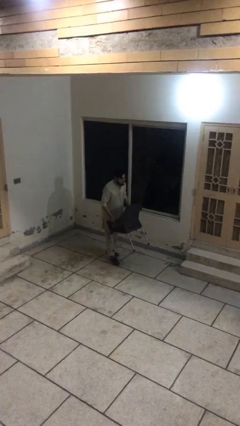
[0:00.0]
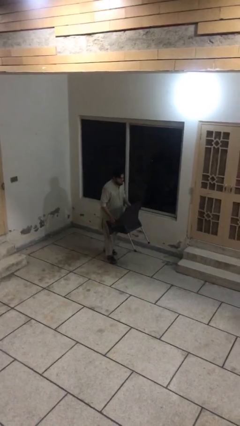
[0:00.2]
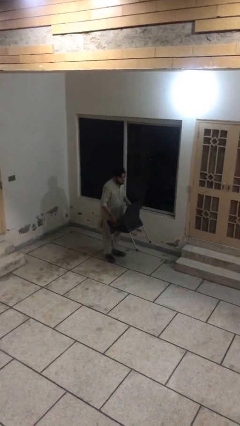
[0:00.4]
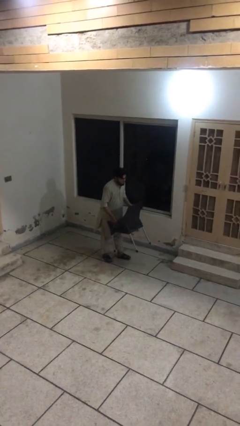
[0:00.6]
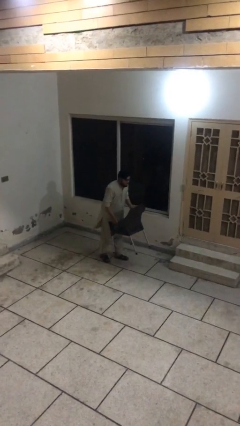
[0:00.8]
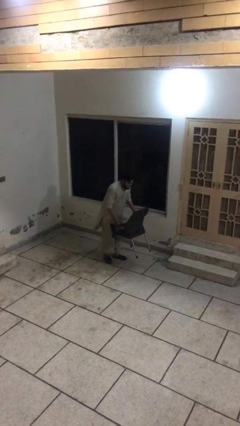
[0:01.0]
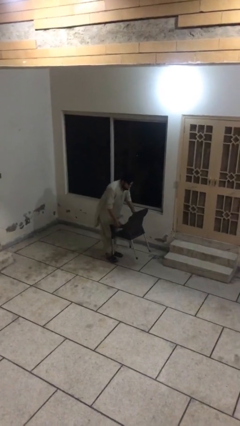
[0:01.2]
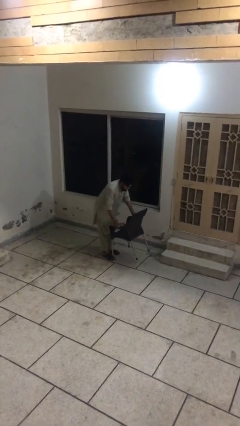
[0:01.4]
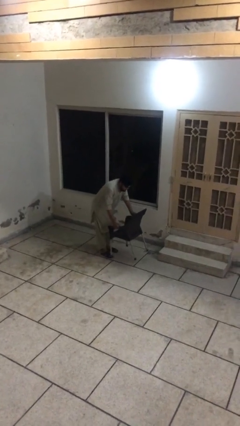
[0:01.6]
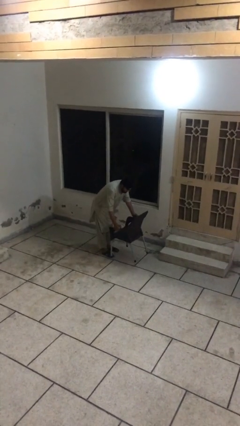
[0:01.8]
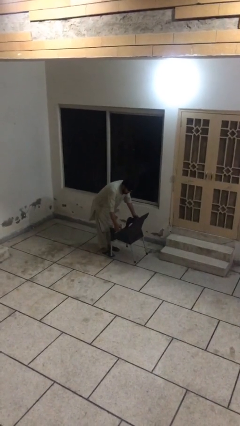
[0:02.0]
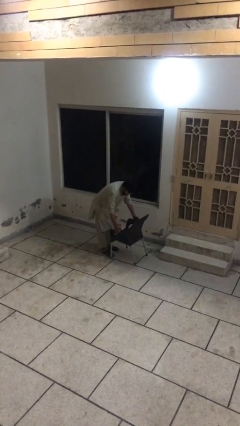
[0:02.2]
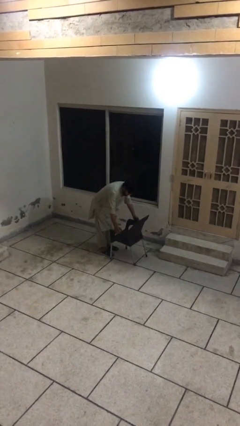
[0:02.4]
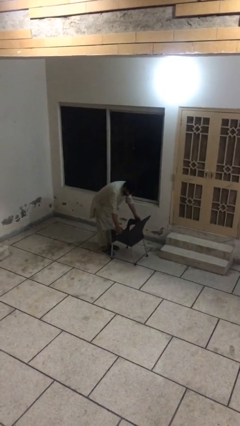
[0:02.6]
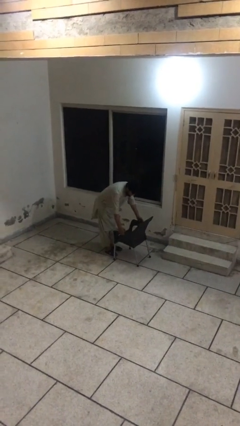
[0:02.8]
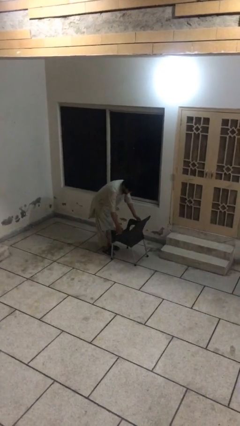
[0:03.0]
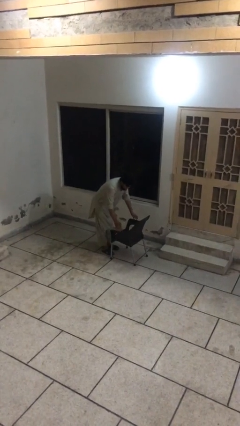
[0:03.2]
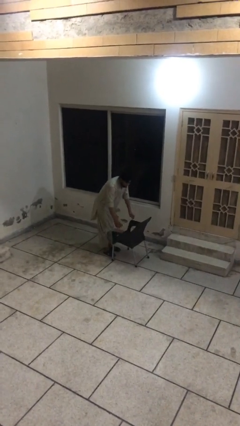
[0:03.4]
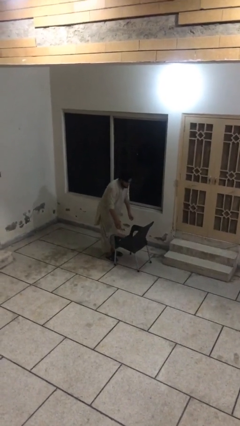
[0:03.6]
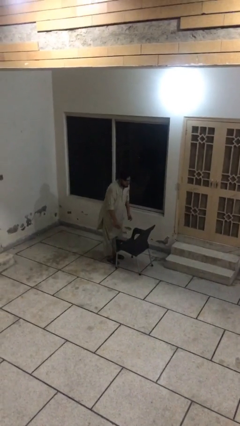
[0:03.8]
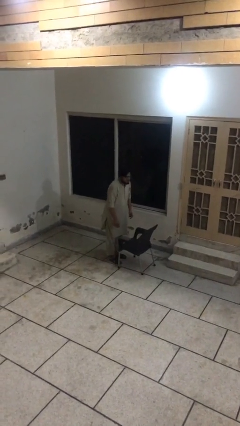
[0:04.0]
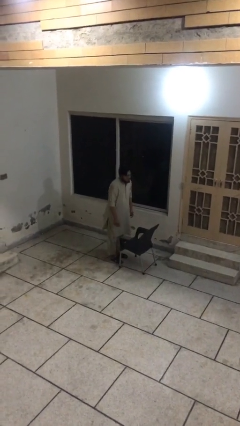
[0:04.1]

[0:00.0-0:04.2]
person puts down object on floor

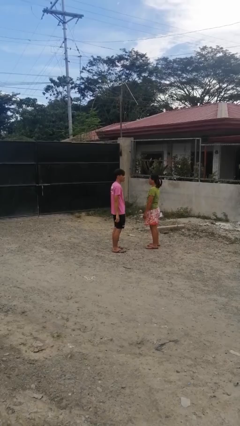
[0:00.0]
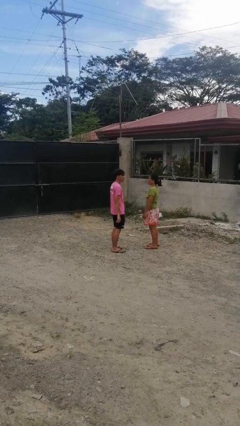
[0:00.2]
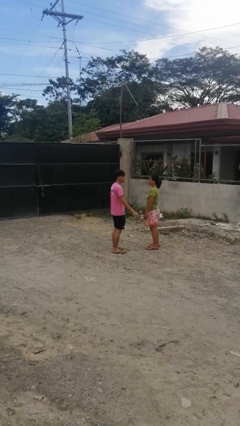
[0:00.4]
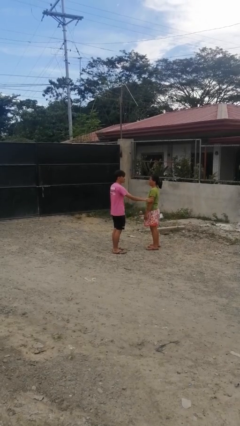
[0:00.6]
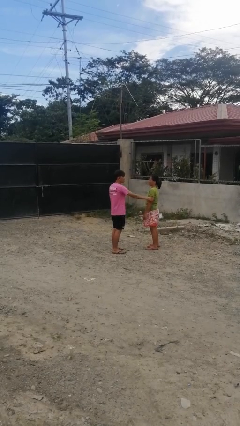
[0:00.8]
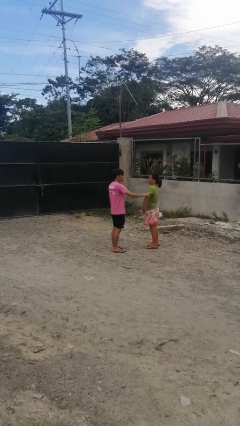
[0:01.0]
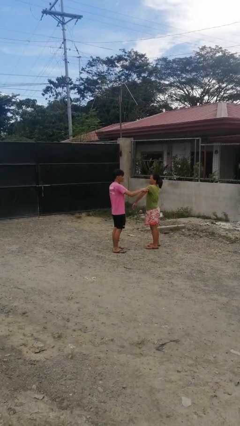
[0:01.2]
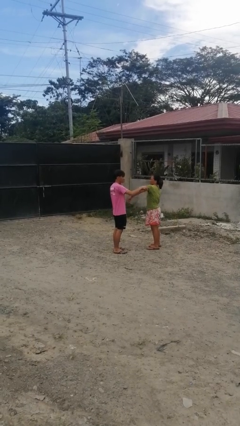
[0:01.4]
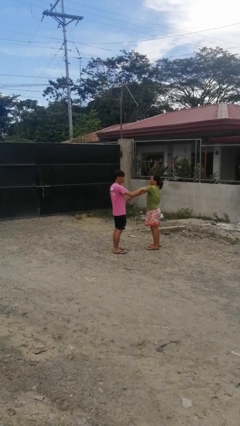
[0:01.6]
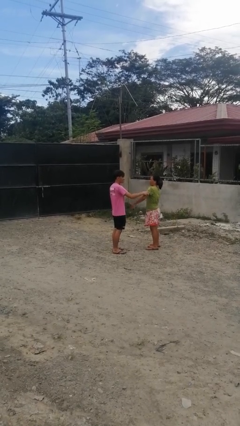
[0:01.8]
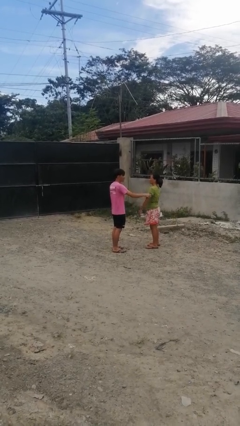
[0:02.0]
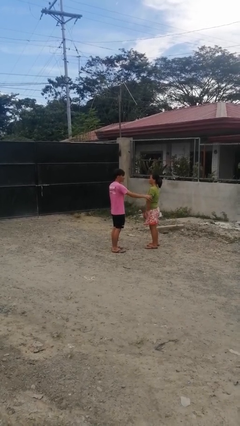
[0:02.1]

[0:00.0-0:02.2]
person grabs person by bicep

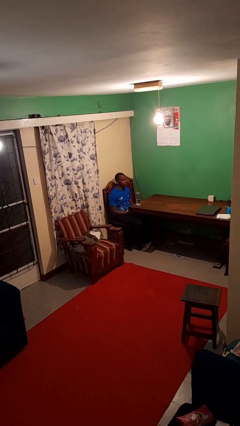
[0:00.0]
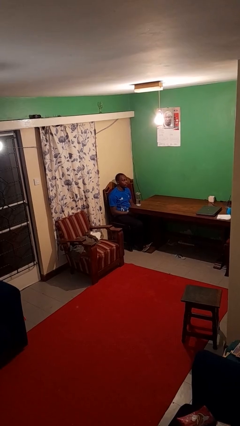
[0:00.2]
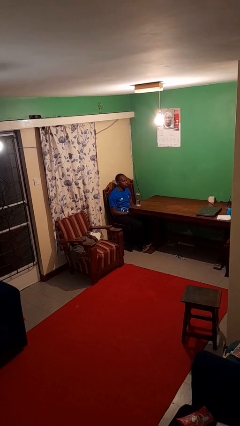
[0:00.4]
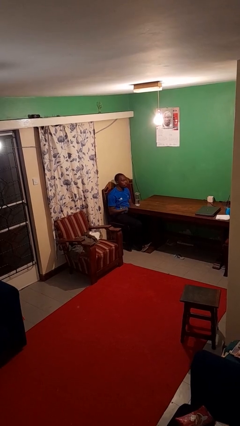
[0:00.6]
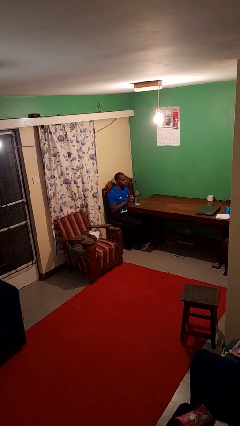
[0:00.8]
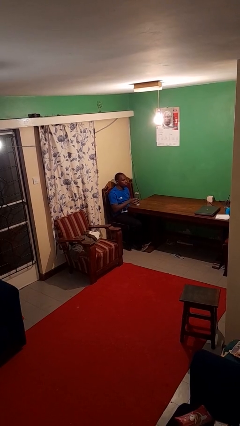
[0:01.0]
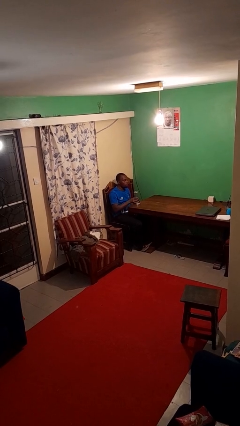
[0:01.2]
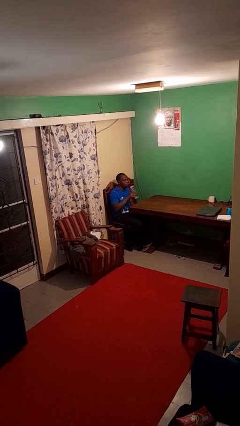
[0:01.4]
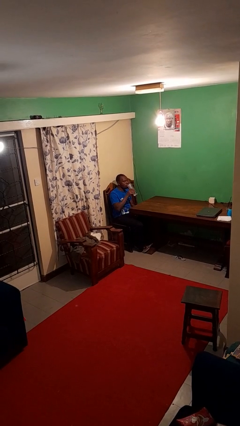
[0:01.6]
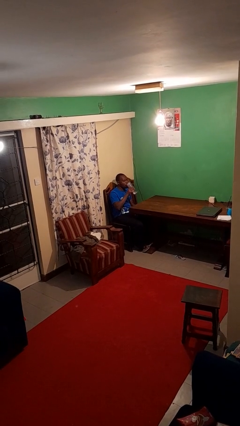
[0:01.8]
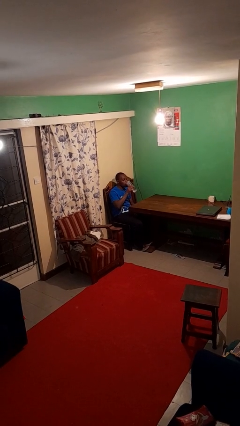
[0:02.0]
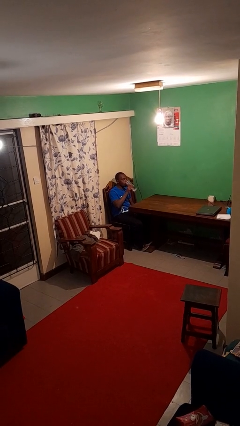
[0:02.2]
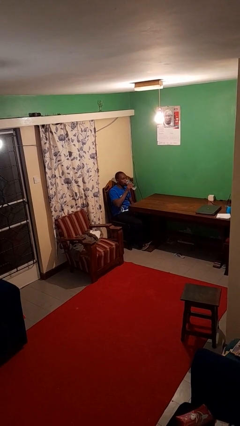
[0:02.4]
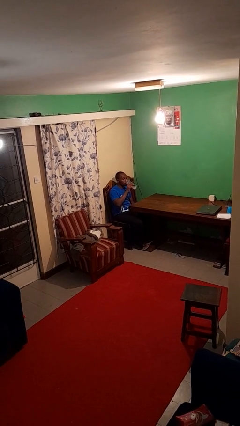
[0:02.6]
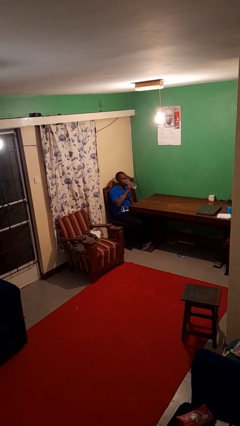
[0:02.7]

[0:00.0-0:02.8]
person drinks from bottle

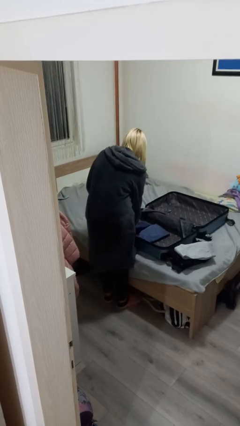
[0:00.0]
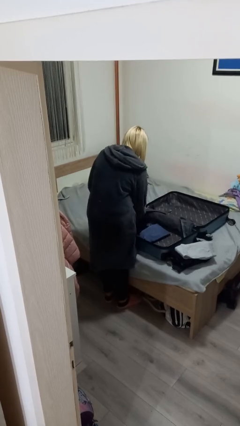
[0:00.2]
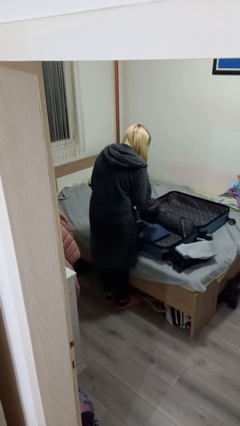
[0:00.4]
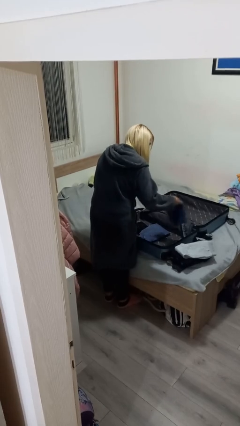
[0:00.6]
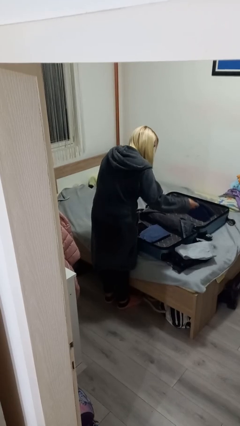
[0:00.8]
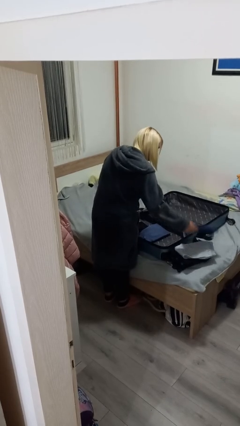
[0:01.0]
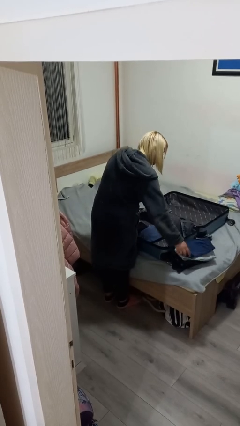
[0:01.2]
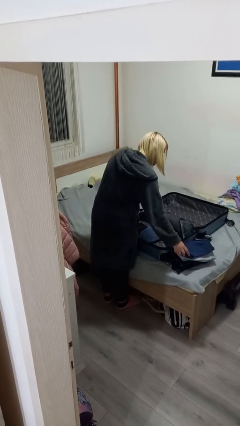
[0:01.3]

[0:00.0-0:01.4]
person unloads clothes from suitcase

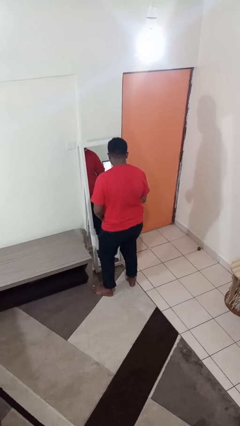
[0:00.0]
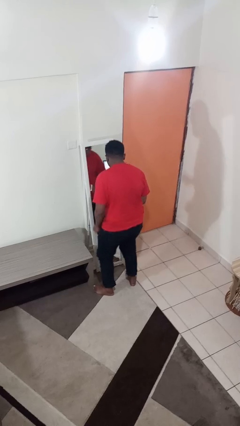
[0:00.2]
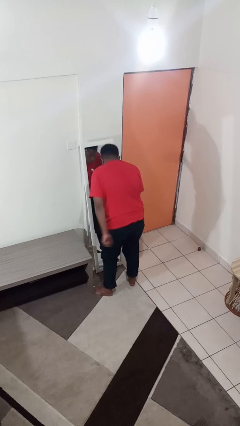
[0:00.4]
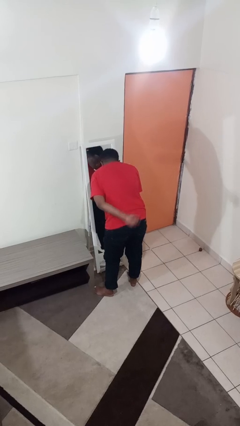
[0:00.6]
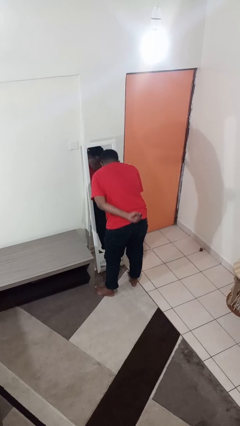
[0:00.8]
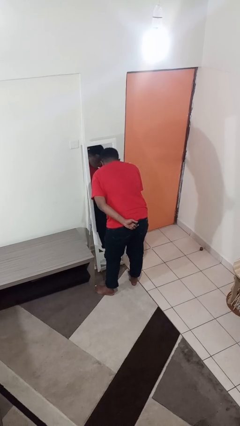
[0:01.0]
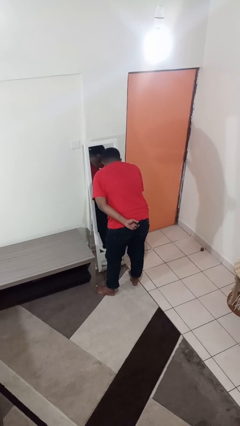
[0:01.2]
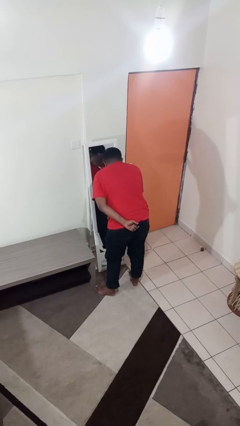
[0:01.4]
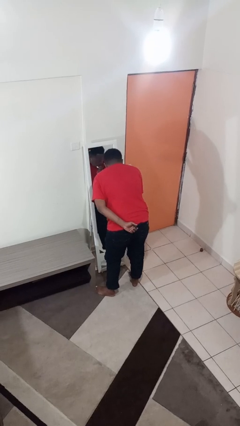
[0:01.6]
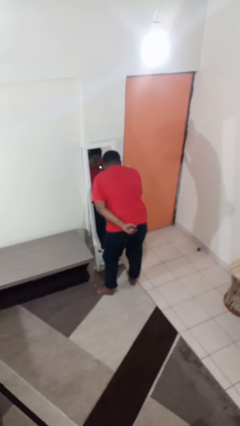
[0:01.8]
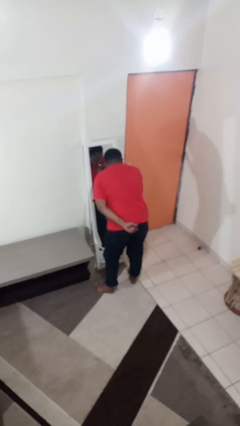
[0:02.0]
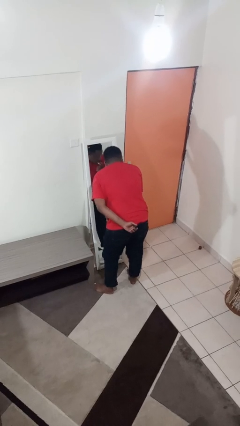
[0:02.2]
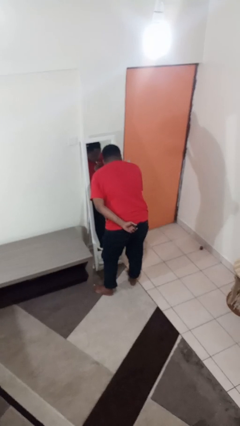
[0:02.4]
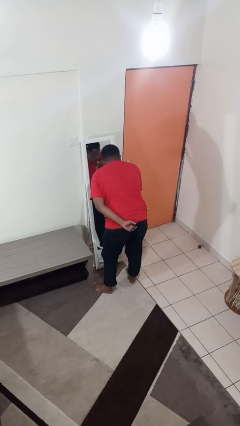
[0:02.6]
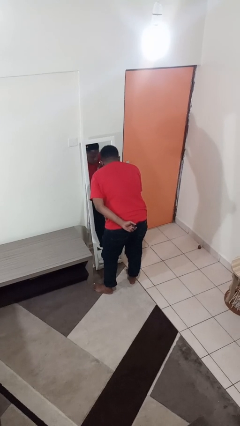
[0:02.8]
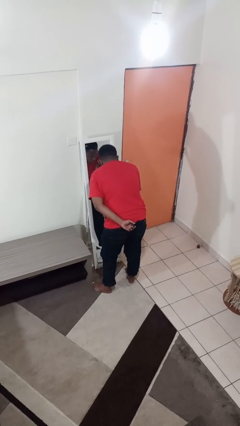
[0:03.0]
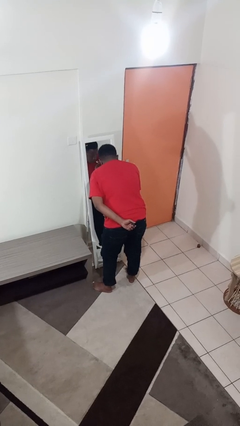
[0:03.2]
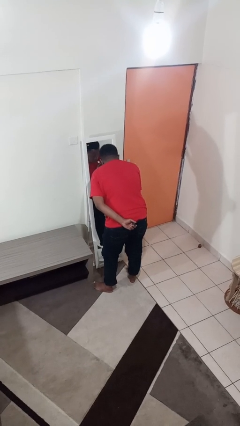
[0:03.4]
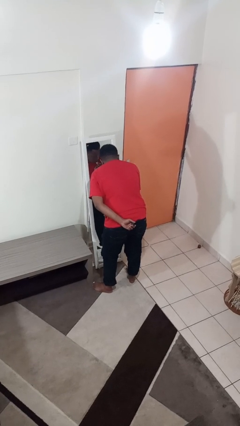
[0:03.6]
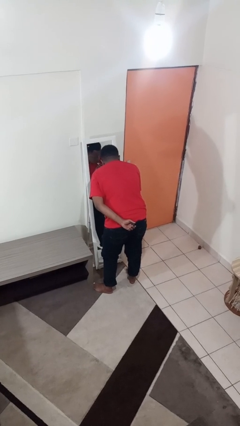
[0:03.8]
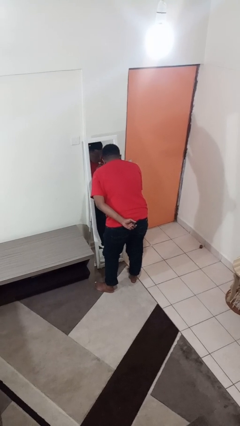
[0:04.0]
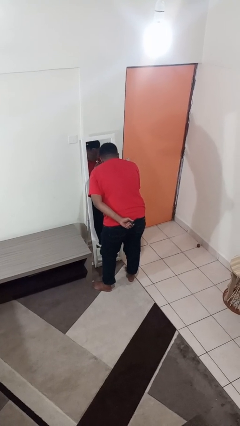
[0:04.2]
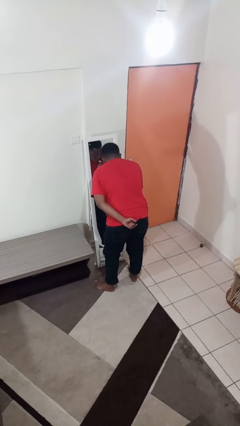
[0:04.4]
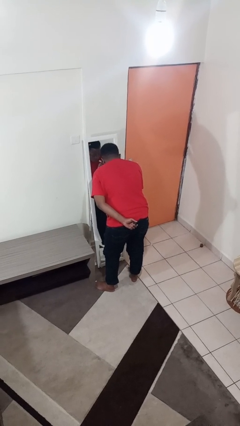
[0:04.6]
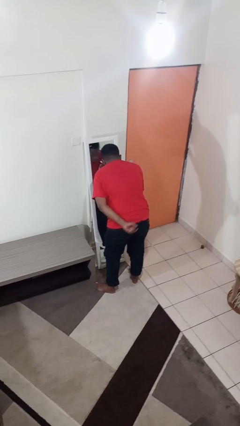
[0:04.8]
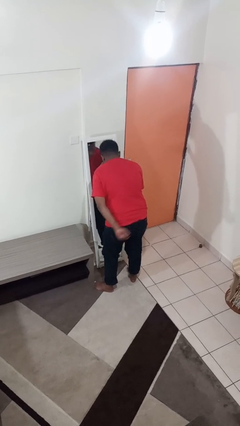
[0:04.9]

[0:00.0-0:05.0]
person applies lip makeup

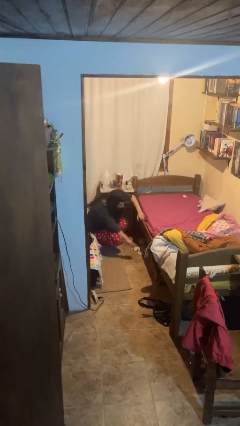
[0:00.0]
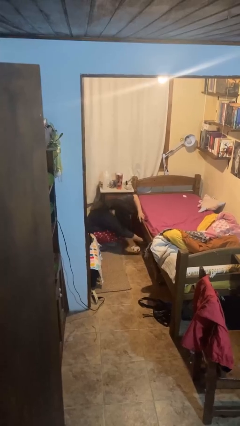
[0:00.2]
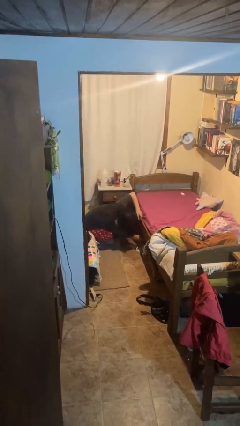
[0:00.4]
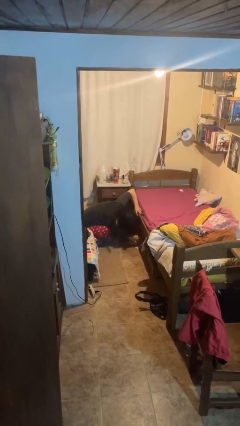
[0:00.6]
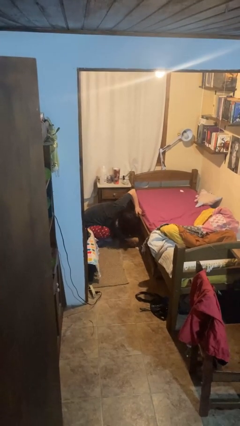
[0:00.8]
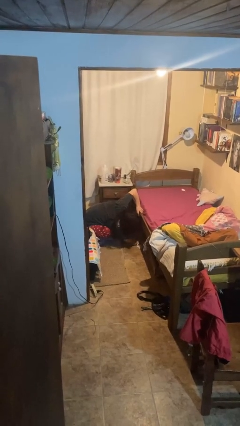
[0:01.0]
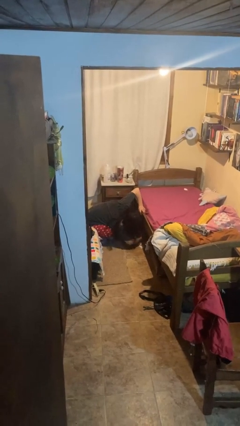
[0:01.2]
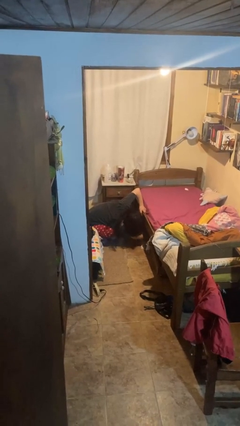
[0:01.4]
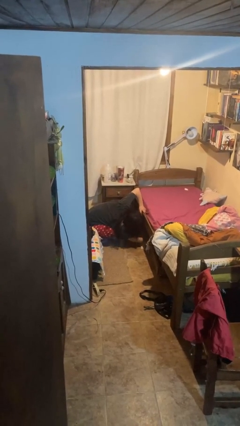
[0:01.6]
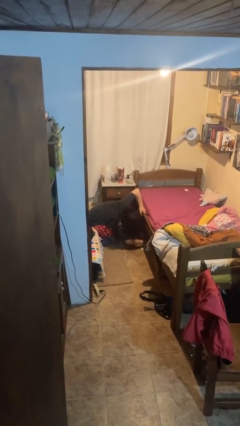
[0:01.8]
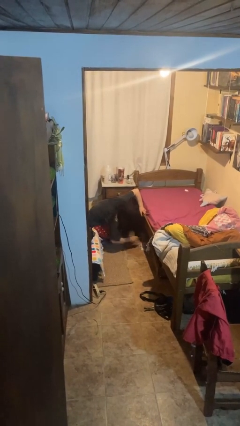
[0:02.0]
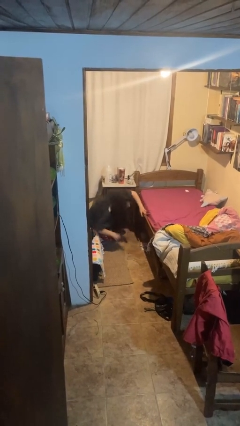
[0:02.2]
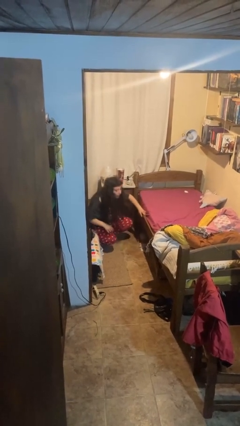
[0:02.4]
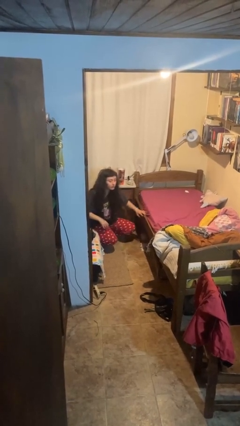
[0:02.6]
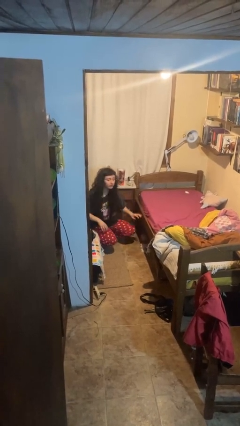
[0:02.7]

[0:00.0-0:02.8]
person searches under bed
